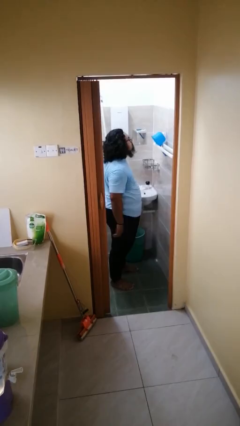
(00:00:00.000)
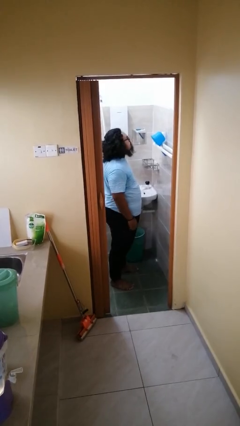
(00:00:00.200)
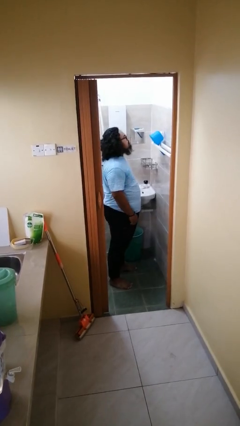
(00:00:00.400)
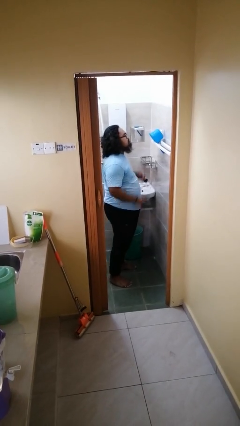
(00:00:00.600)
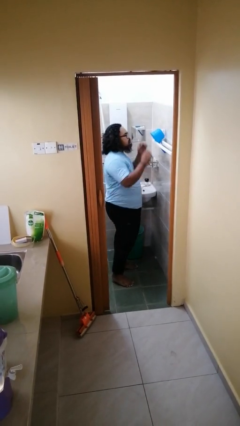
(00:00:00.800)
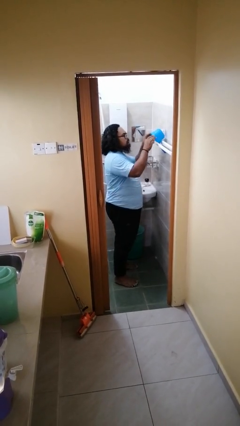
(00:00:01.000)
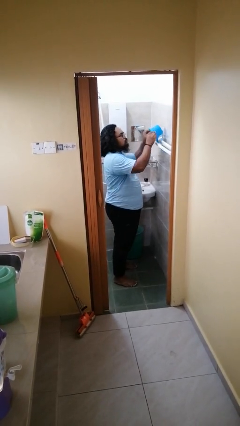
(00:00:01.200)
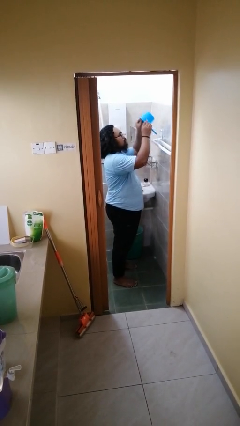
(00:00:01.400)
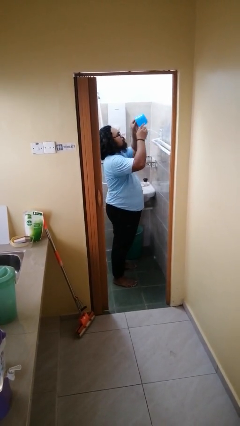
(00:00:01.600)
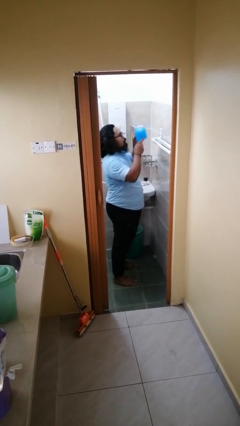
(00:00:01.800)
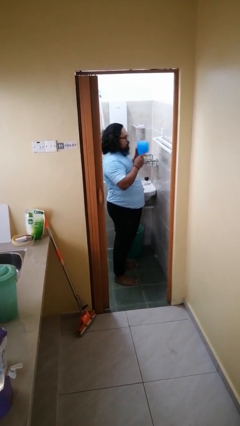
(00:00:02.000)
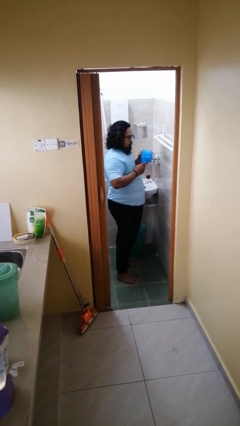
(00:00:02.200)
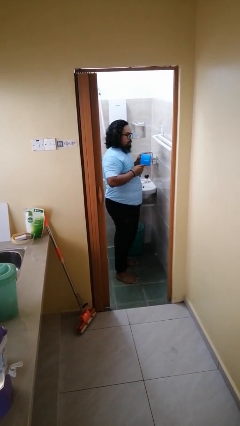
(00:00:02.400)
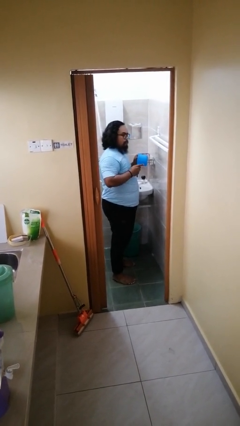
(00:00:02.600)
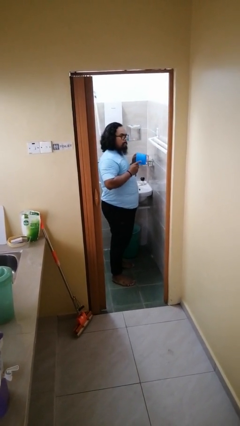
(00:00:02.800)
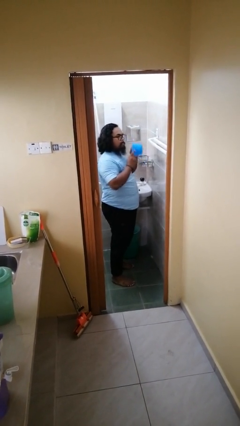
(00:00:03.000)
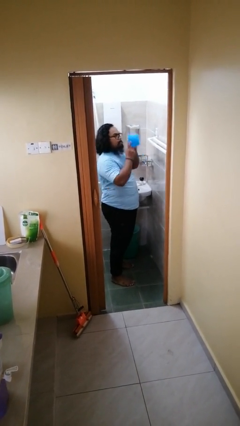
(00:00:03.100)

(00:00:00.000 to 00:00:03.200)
person picks up object from countertop

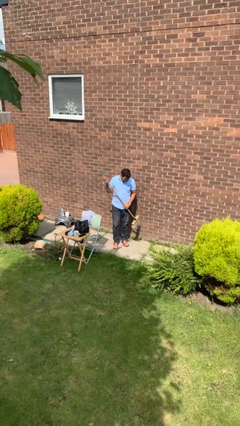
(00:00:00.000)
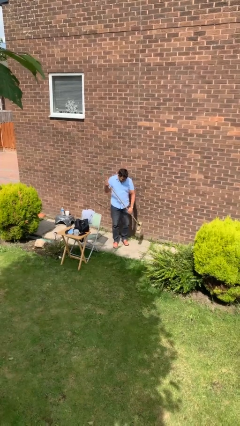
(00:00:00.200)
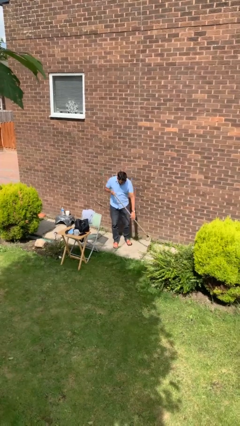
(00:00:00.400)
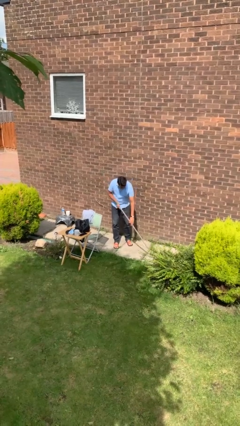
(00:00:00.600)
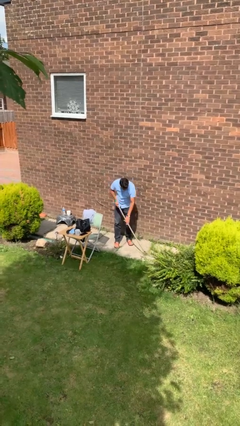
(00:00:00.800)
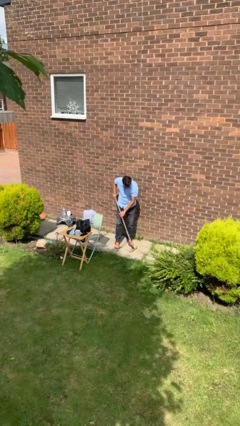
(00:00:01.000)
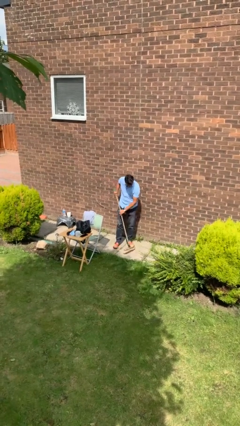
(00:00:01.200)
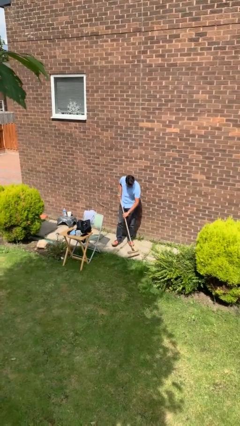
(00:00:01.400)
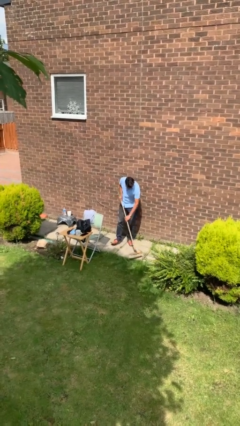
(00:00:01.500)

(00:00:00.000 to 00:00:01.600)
person sweeps floor

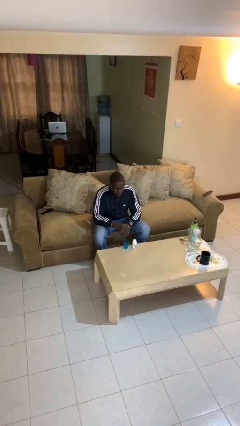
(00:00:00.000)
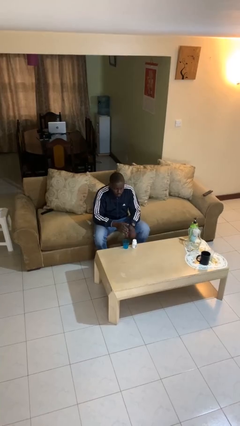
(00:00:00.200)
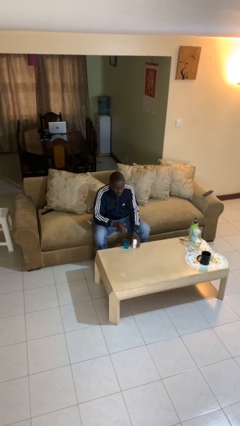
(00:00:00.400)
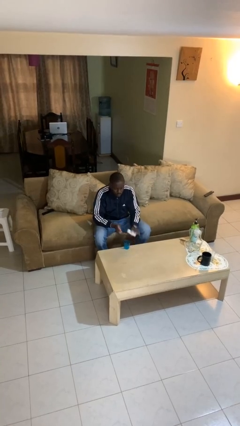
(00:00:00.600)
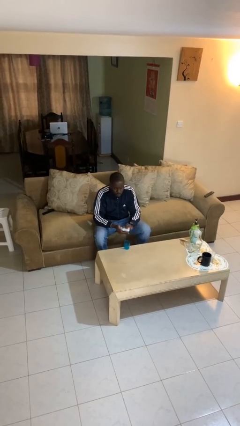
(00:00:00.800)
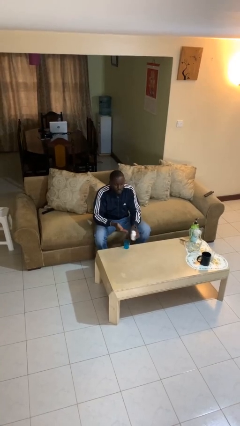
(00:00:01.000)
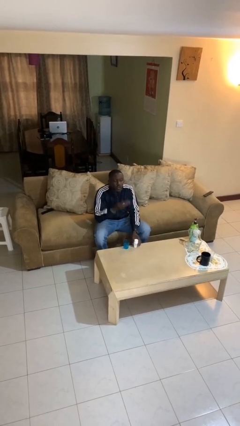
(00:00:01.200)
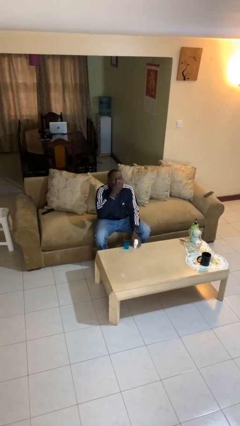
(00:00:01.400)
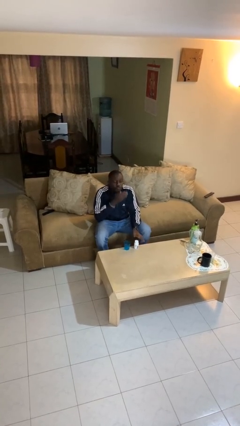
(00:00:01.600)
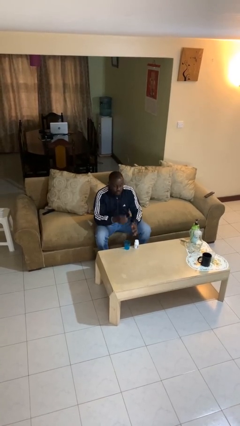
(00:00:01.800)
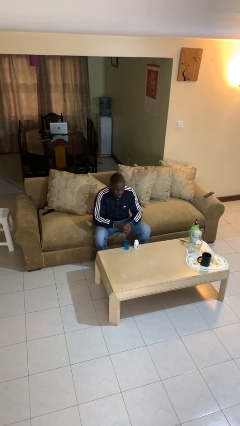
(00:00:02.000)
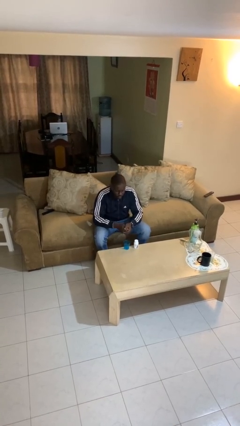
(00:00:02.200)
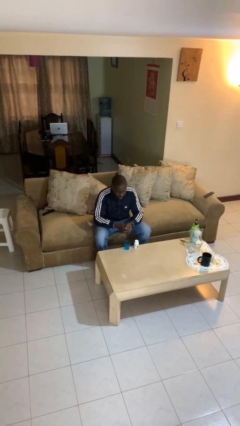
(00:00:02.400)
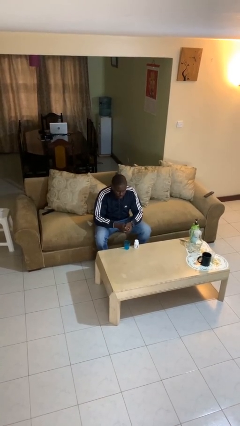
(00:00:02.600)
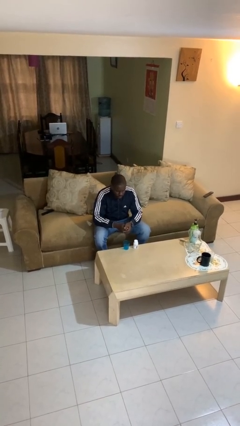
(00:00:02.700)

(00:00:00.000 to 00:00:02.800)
person takes medicine pills

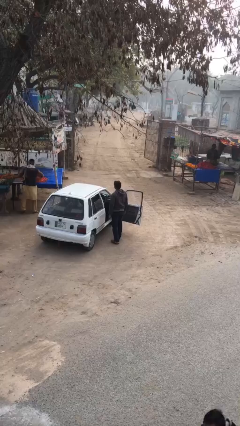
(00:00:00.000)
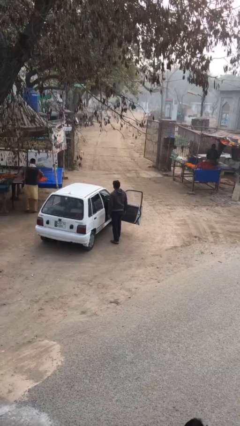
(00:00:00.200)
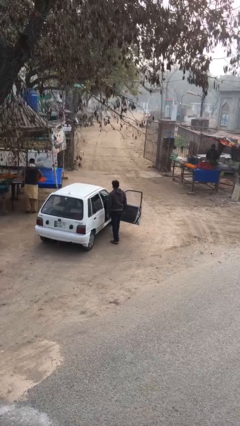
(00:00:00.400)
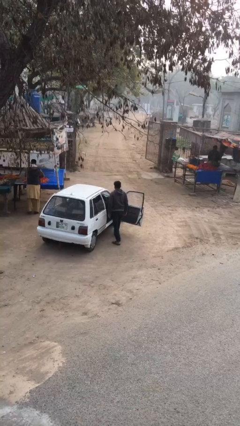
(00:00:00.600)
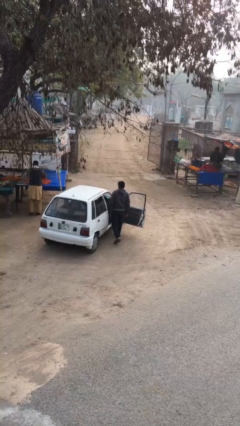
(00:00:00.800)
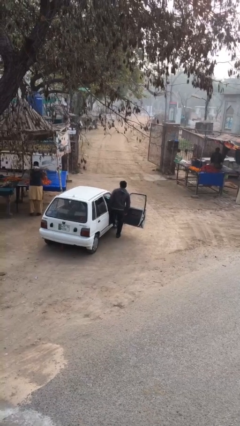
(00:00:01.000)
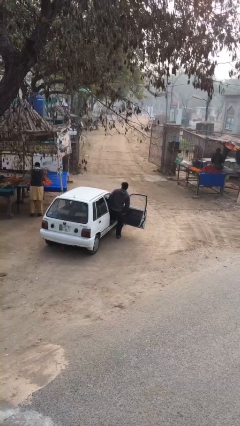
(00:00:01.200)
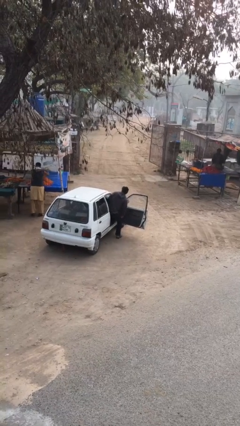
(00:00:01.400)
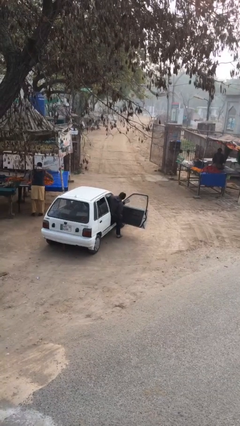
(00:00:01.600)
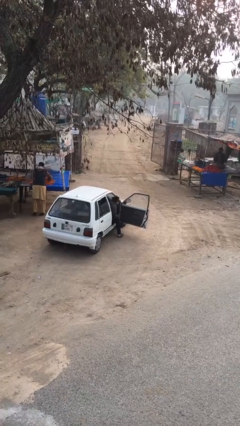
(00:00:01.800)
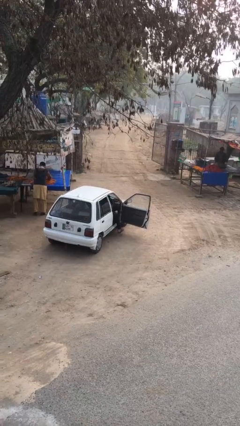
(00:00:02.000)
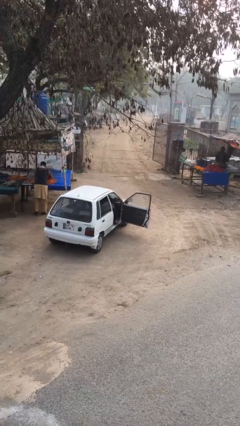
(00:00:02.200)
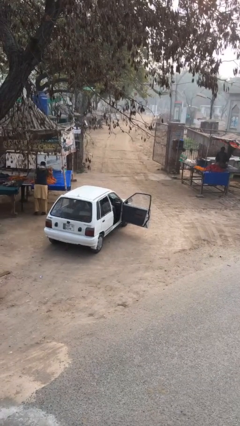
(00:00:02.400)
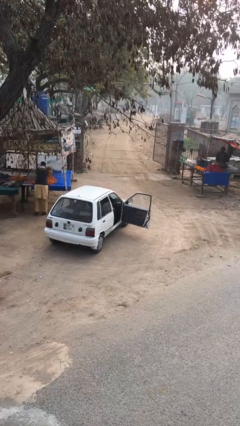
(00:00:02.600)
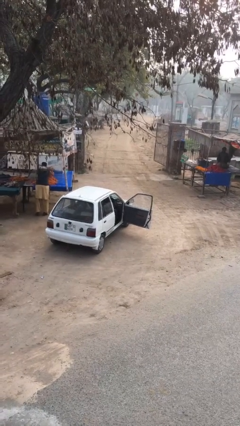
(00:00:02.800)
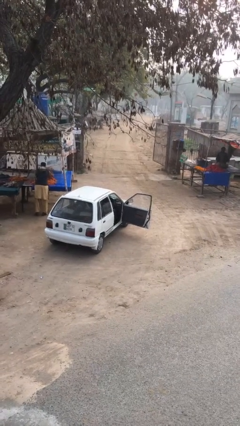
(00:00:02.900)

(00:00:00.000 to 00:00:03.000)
person enters car

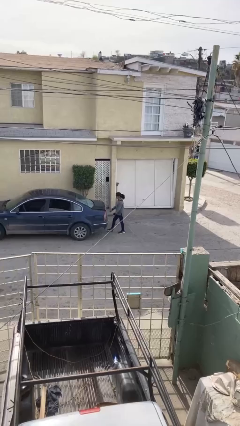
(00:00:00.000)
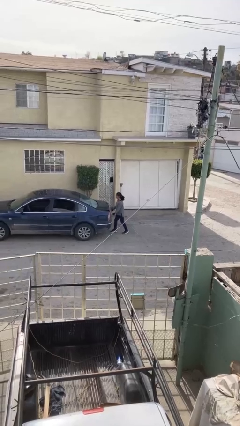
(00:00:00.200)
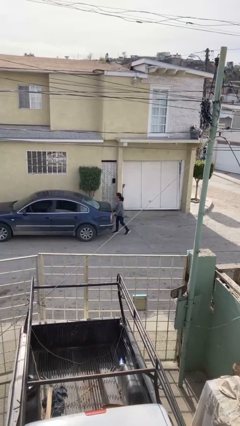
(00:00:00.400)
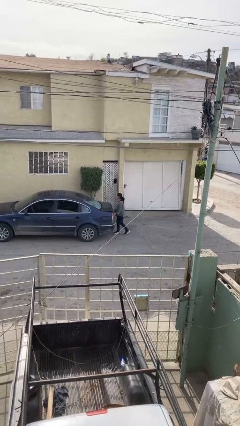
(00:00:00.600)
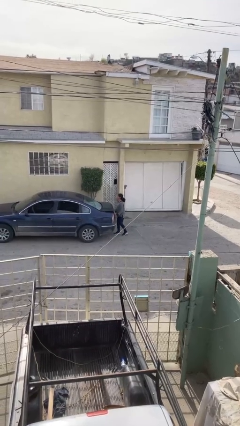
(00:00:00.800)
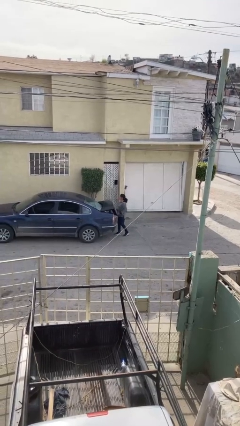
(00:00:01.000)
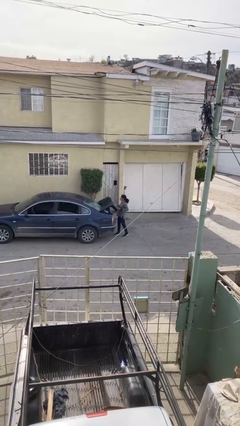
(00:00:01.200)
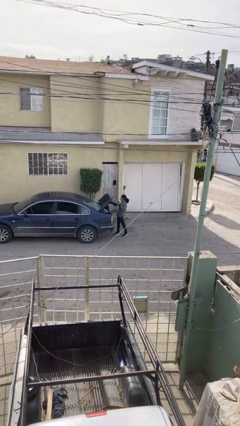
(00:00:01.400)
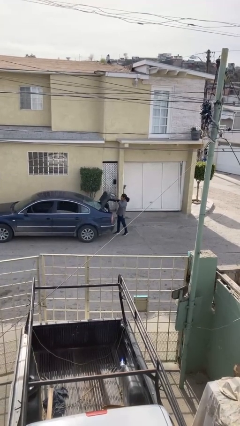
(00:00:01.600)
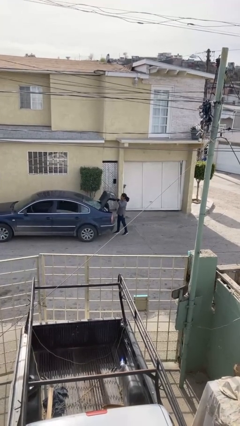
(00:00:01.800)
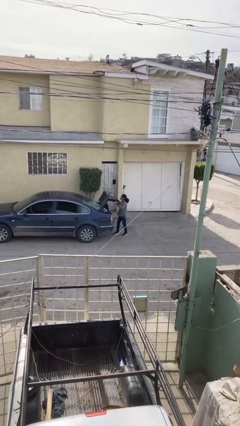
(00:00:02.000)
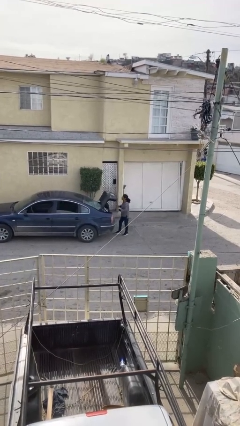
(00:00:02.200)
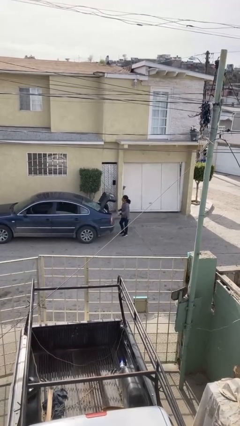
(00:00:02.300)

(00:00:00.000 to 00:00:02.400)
person opens car trunk

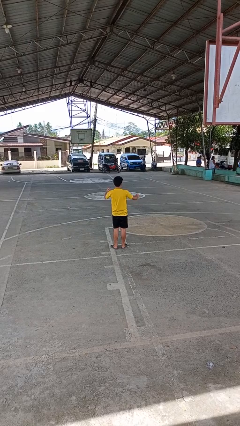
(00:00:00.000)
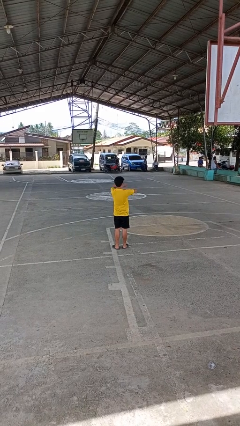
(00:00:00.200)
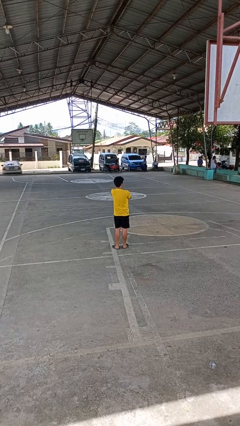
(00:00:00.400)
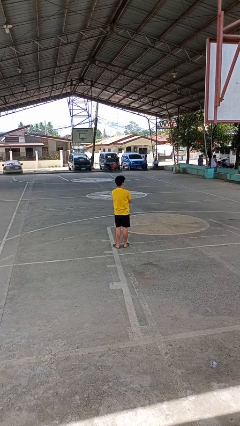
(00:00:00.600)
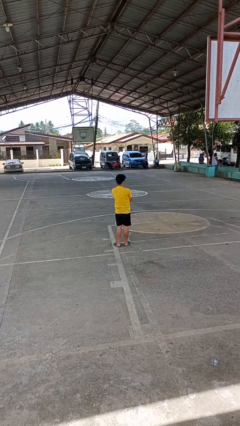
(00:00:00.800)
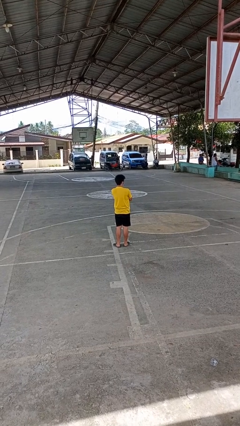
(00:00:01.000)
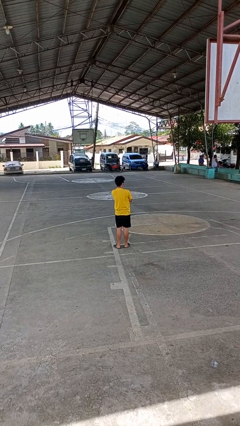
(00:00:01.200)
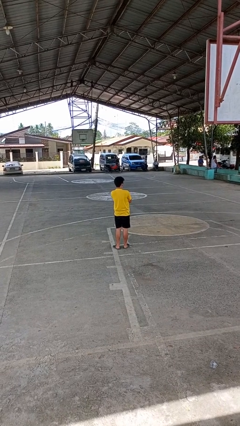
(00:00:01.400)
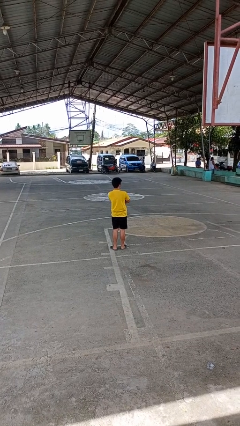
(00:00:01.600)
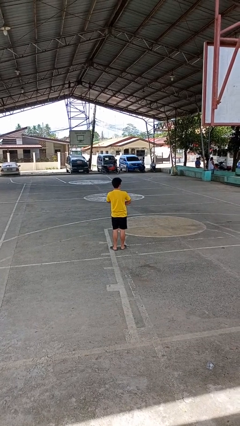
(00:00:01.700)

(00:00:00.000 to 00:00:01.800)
person crosses arms

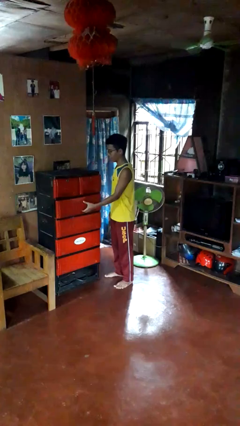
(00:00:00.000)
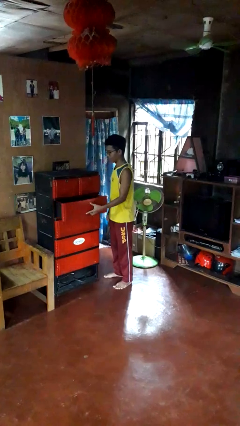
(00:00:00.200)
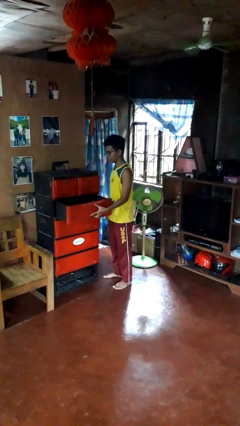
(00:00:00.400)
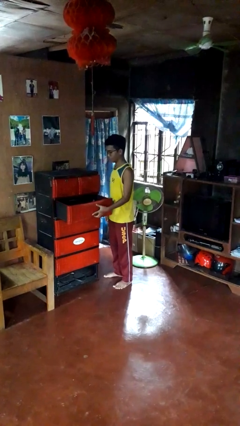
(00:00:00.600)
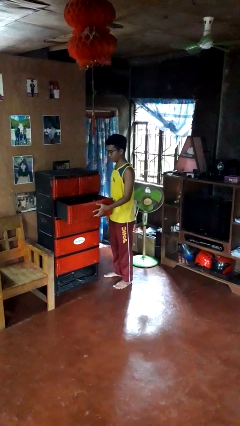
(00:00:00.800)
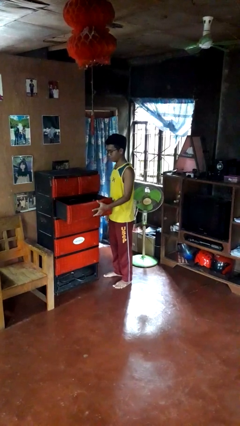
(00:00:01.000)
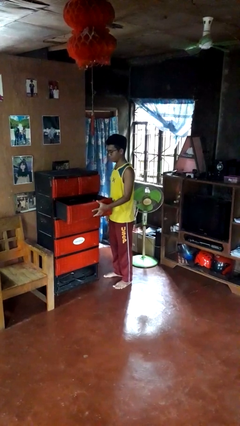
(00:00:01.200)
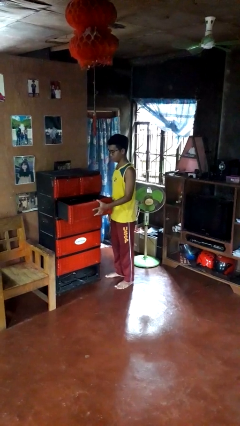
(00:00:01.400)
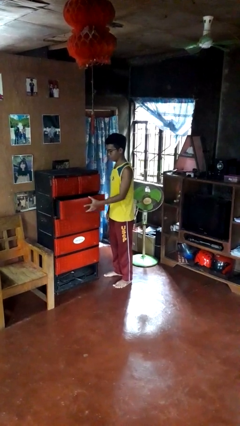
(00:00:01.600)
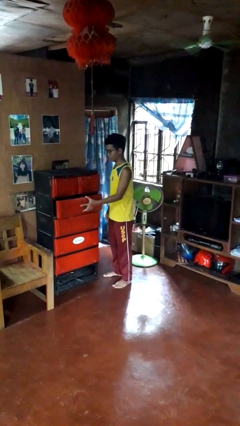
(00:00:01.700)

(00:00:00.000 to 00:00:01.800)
person opens dresser drawer

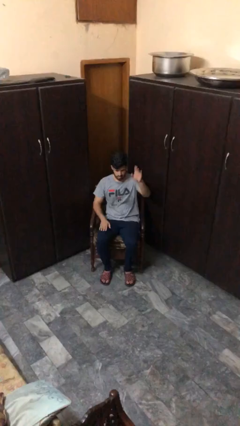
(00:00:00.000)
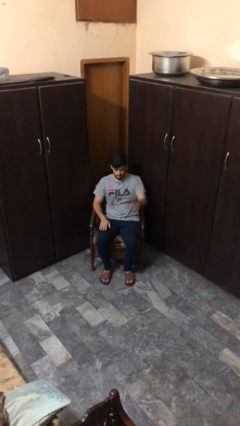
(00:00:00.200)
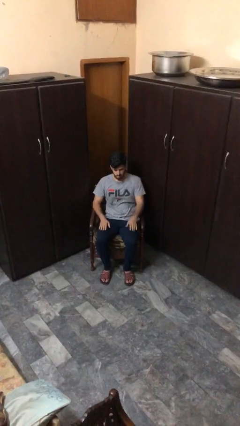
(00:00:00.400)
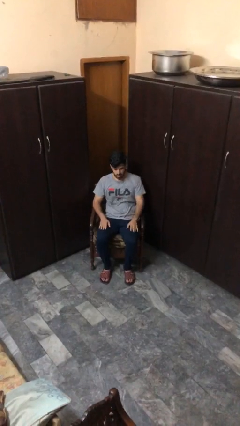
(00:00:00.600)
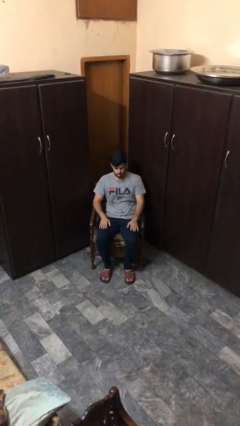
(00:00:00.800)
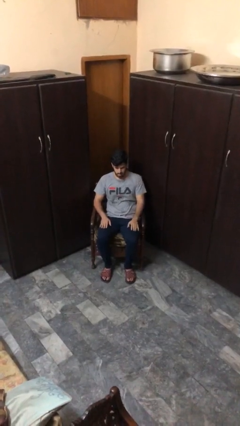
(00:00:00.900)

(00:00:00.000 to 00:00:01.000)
person gestures lower hand
